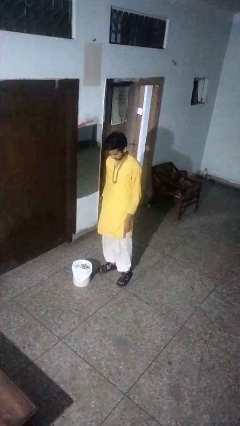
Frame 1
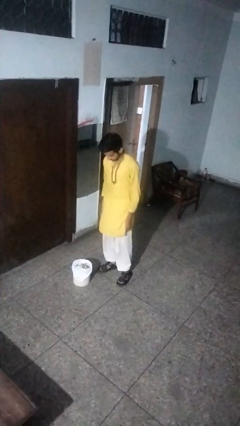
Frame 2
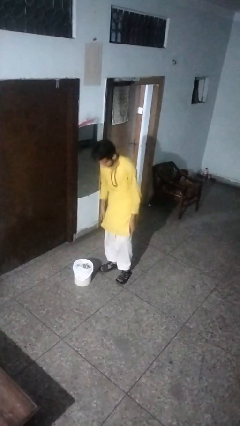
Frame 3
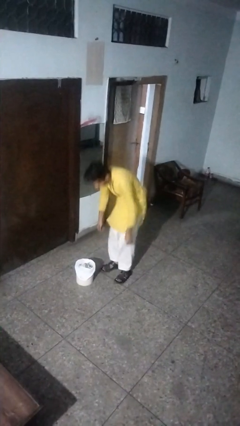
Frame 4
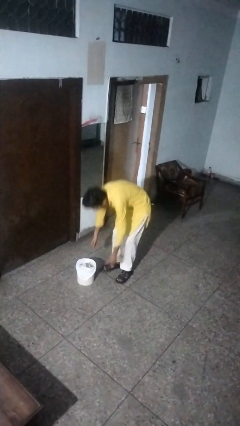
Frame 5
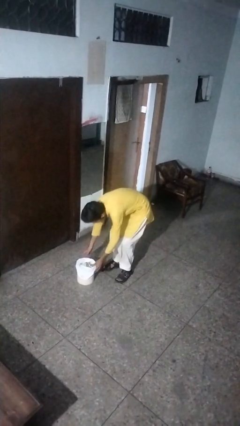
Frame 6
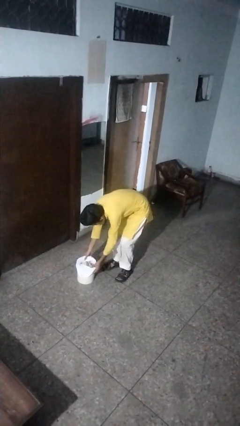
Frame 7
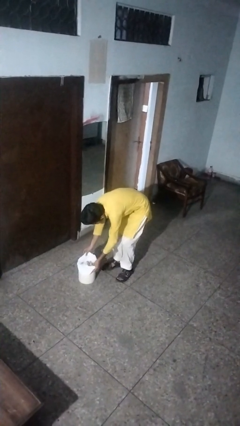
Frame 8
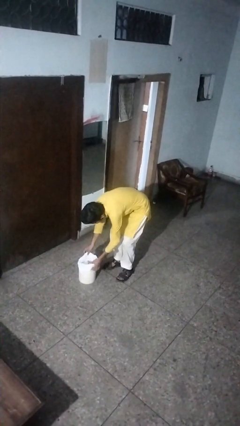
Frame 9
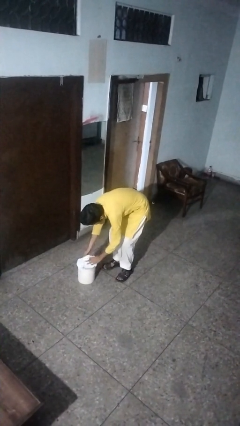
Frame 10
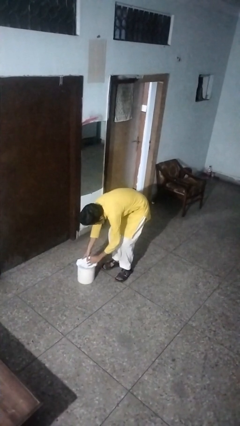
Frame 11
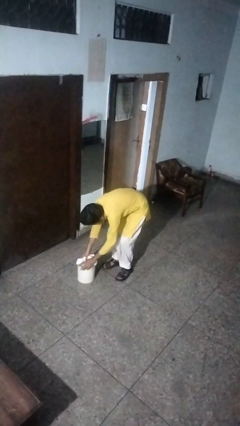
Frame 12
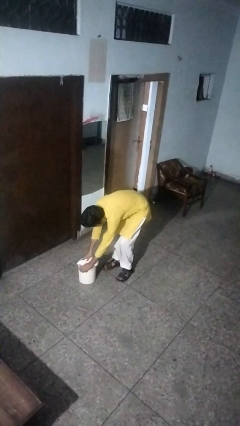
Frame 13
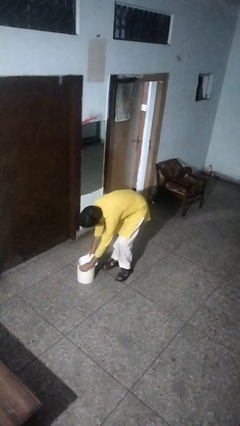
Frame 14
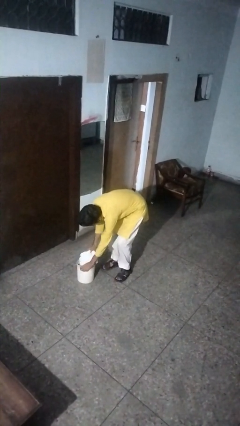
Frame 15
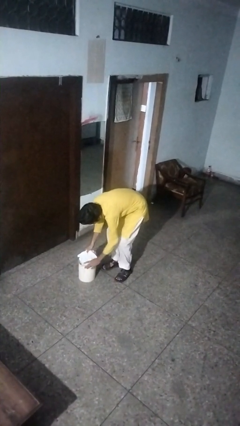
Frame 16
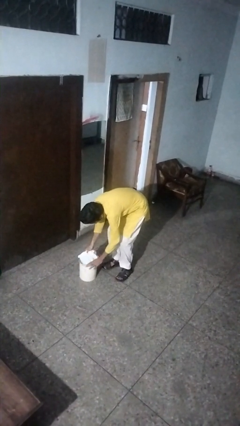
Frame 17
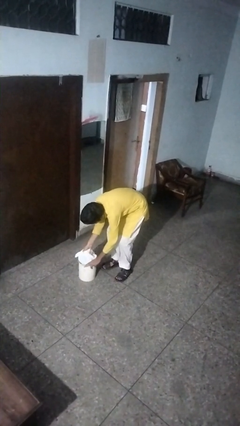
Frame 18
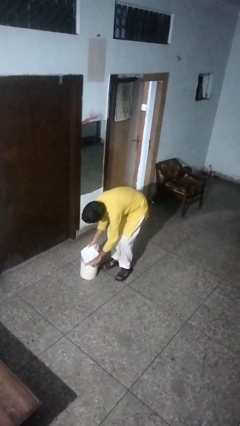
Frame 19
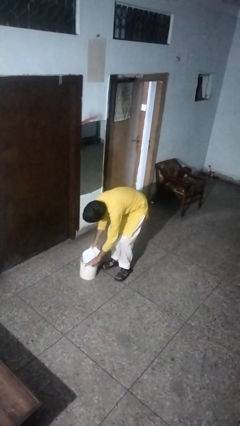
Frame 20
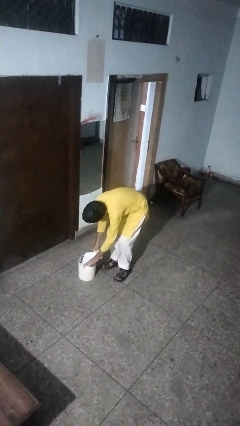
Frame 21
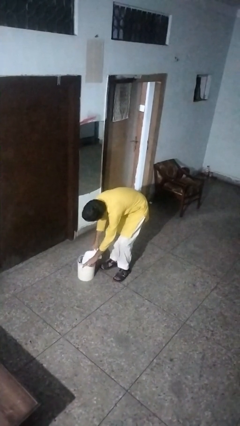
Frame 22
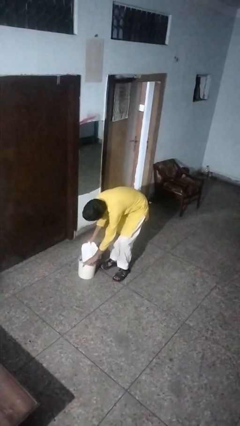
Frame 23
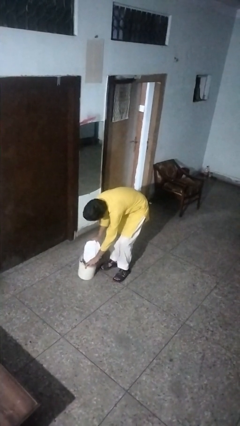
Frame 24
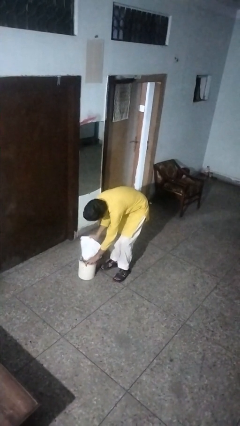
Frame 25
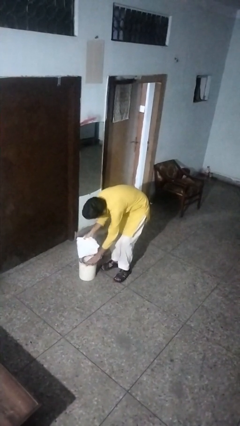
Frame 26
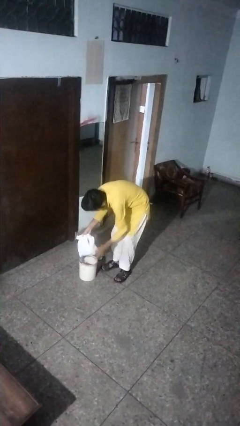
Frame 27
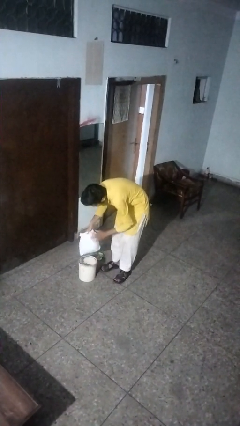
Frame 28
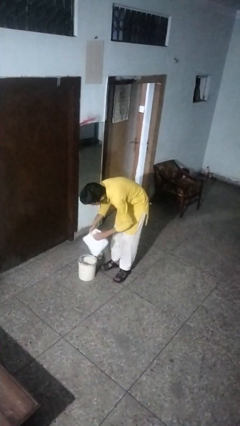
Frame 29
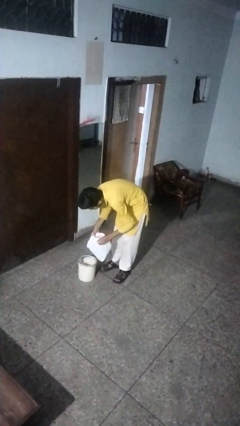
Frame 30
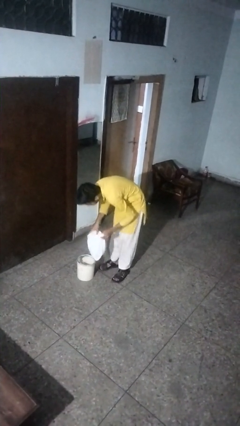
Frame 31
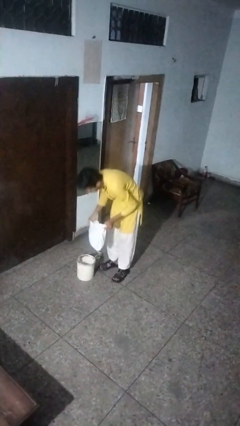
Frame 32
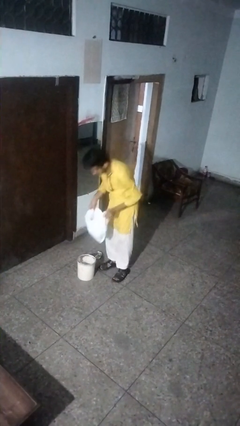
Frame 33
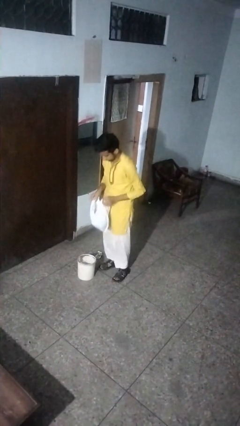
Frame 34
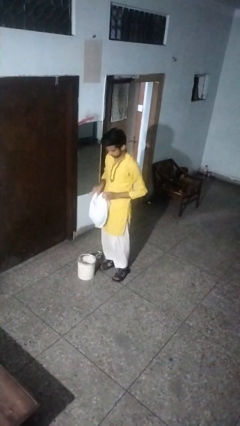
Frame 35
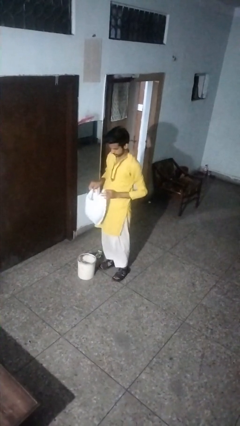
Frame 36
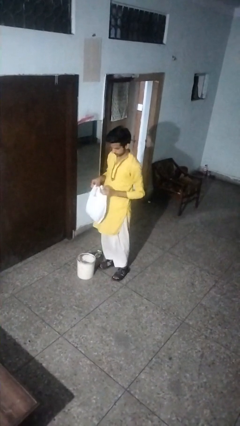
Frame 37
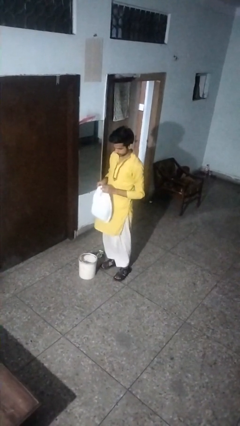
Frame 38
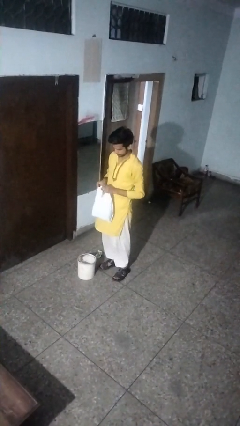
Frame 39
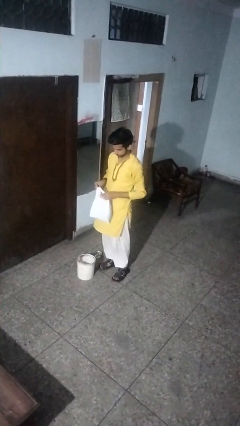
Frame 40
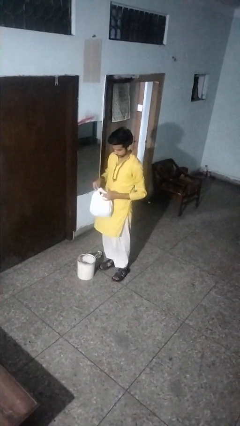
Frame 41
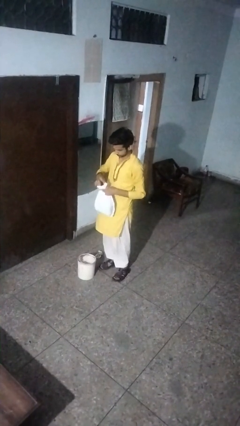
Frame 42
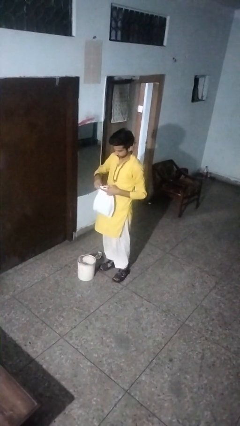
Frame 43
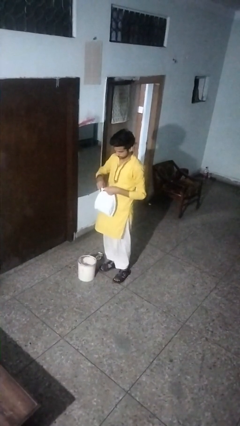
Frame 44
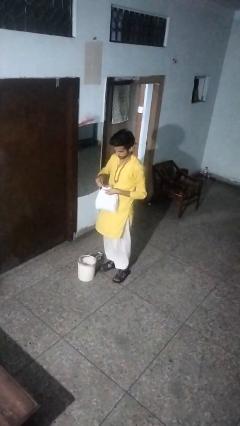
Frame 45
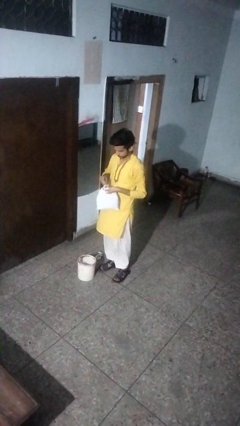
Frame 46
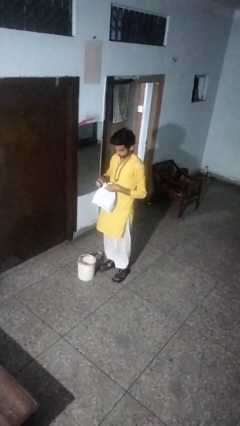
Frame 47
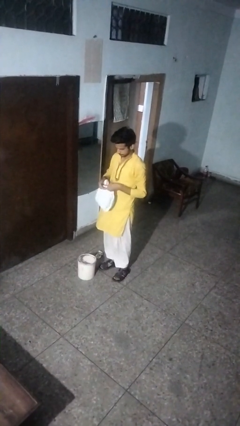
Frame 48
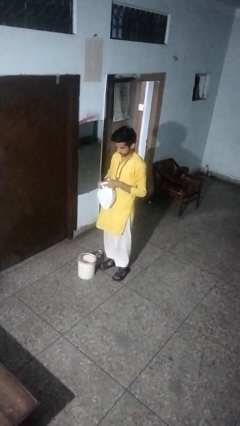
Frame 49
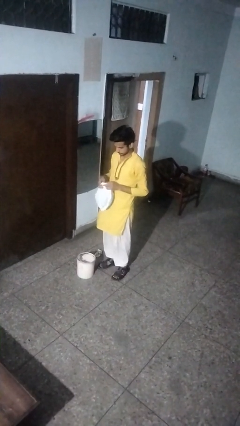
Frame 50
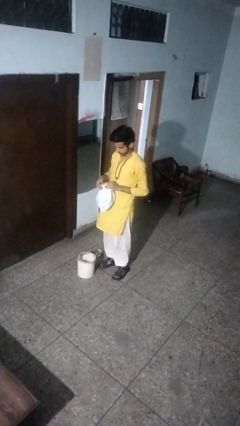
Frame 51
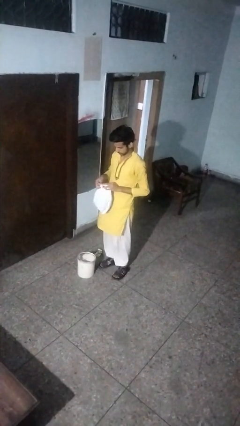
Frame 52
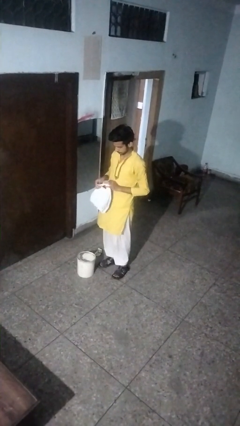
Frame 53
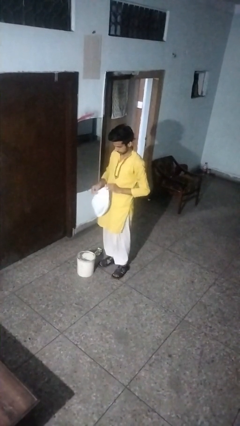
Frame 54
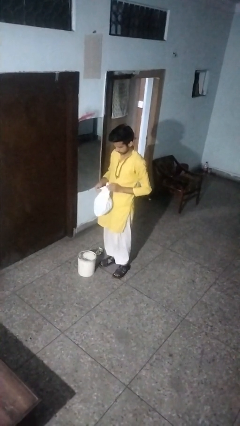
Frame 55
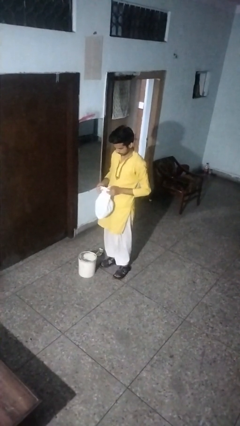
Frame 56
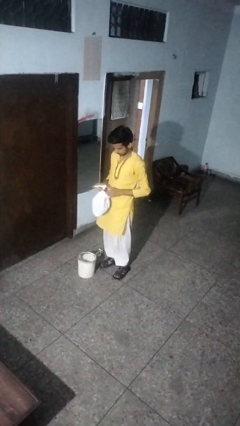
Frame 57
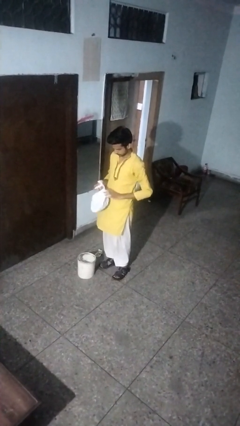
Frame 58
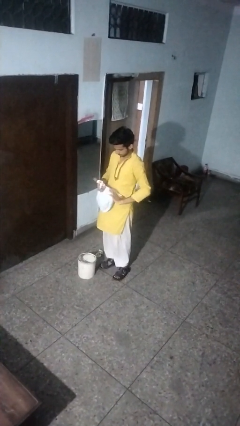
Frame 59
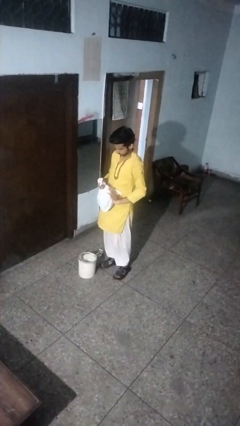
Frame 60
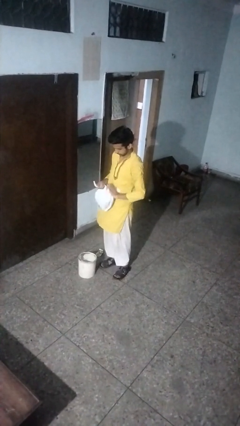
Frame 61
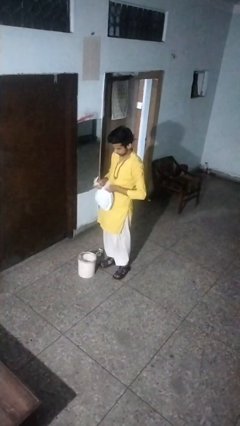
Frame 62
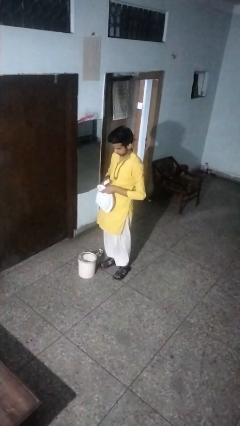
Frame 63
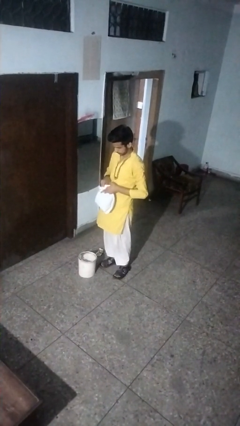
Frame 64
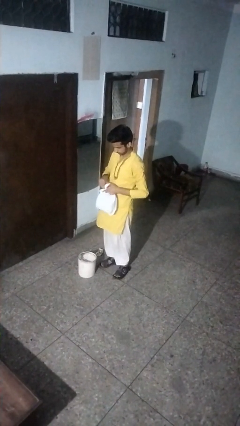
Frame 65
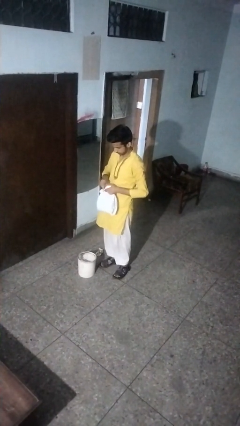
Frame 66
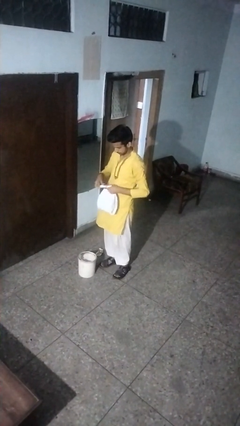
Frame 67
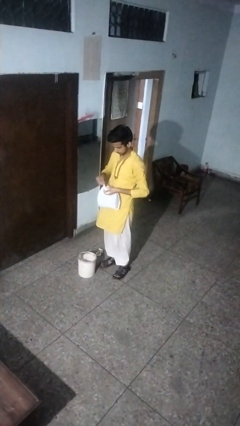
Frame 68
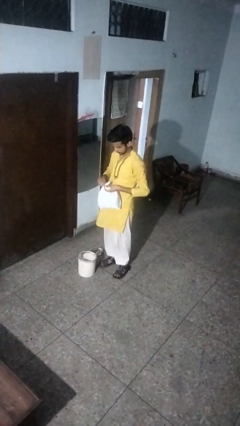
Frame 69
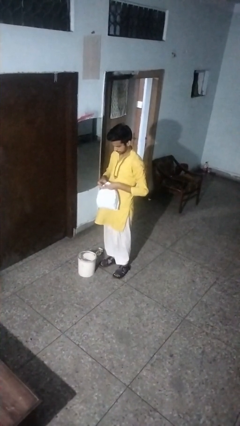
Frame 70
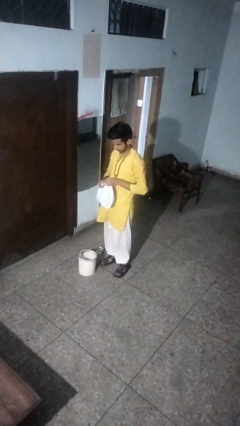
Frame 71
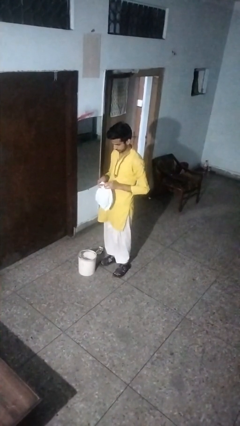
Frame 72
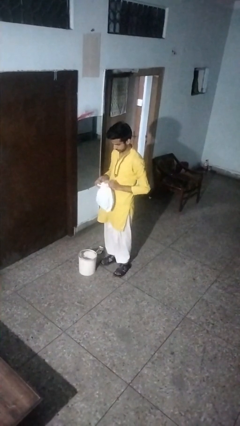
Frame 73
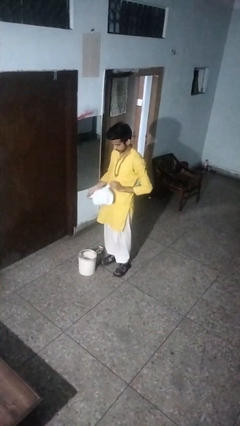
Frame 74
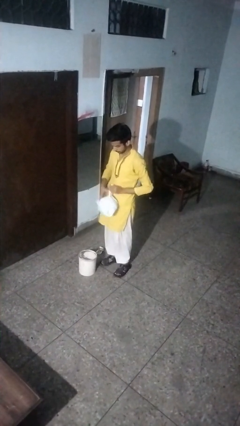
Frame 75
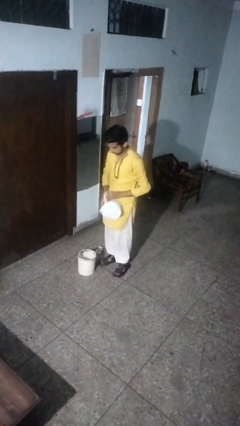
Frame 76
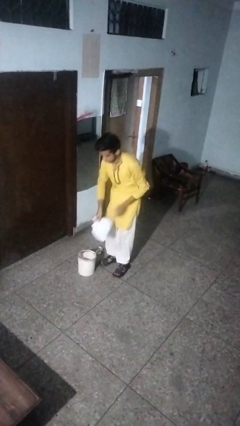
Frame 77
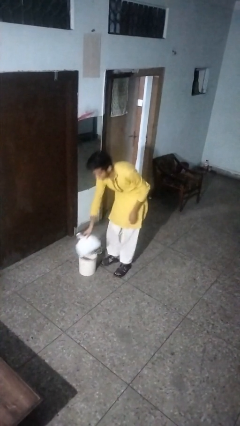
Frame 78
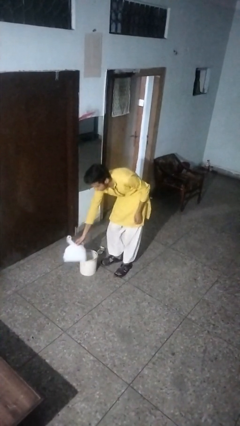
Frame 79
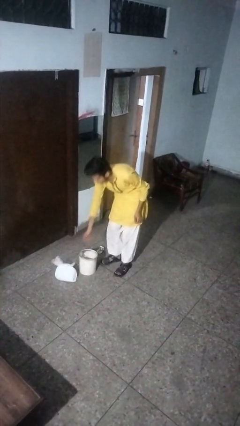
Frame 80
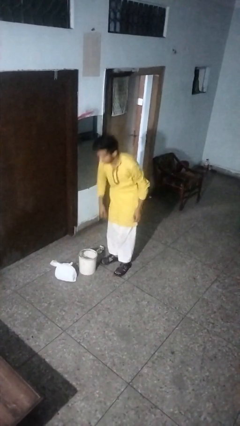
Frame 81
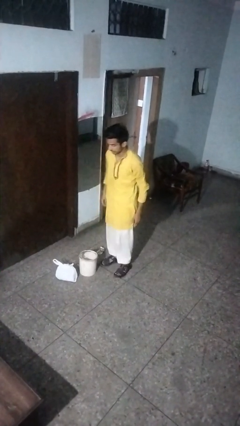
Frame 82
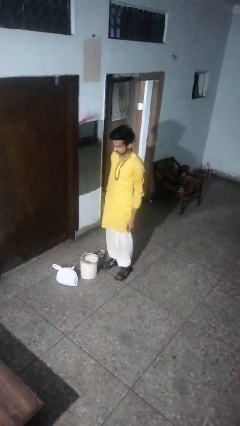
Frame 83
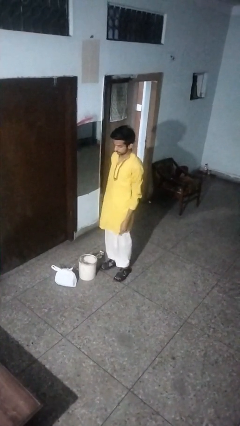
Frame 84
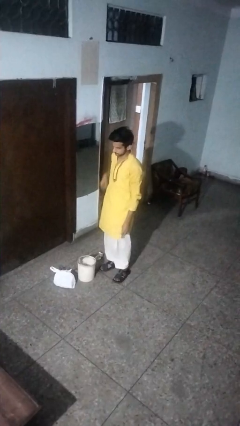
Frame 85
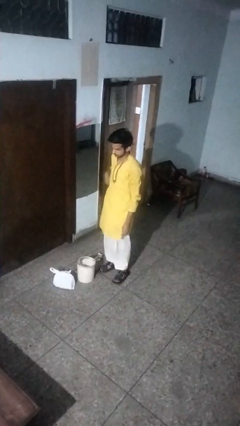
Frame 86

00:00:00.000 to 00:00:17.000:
person removes trashbag from trashcan

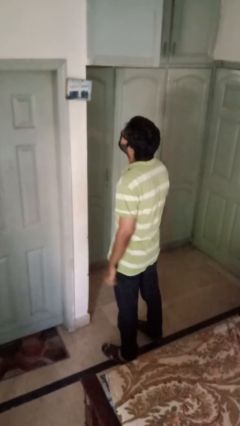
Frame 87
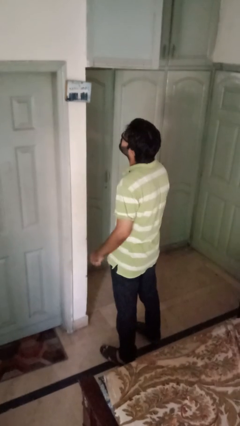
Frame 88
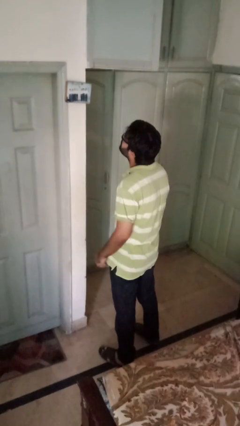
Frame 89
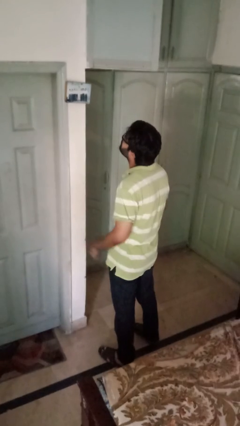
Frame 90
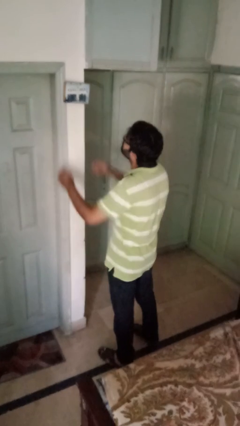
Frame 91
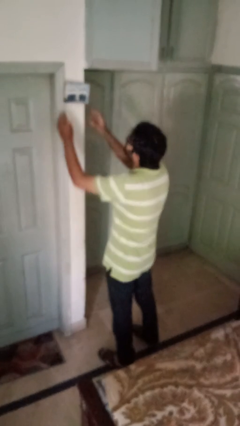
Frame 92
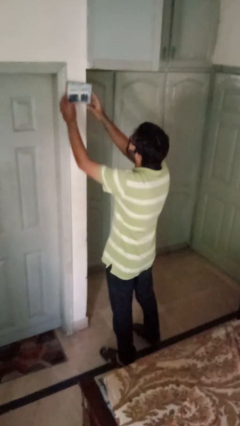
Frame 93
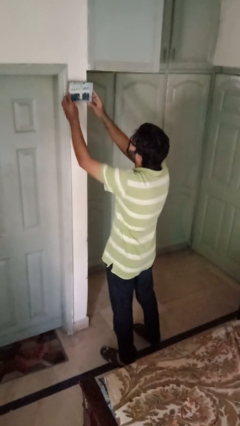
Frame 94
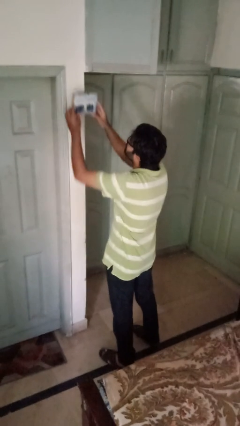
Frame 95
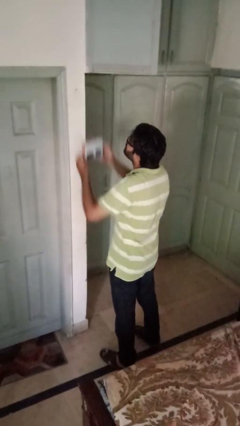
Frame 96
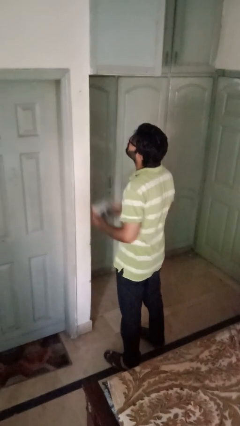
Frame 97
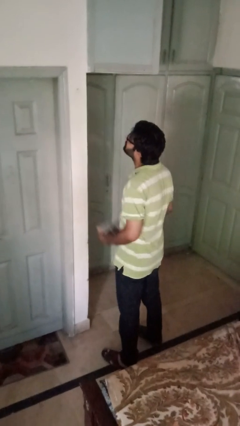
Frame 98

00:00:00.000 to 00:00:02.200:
person takes down picture frame
